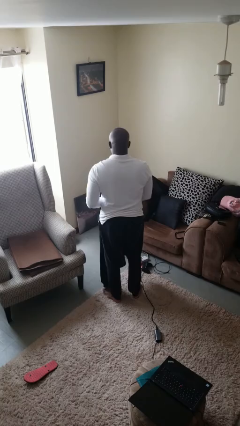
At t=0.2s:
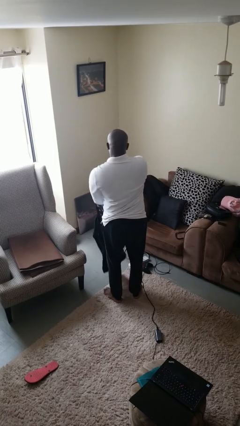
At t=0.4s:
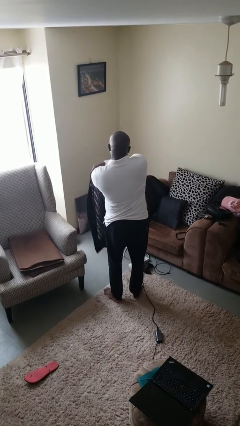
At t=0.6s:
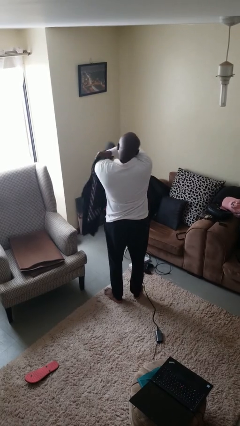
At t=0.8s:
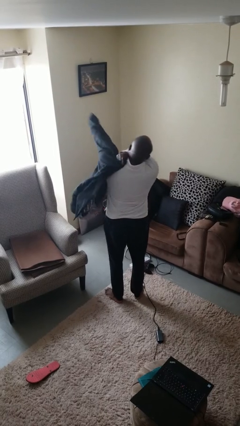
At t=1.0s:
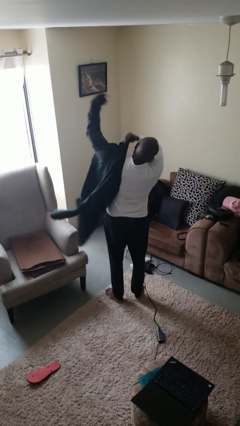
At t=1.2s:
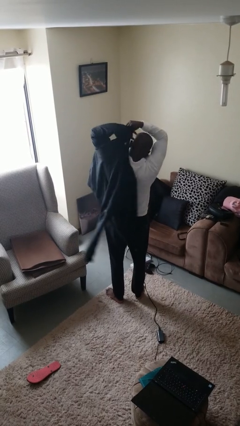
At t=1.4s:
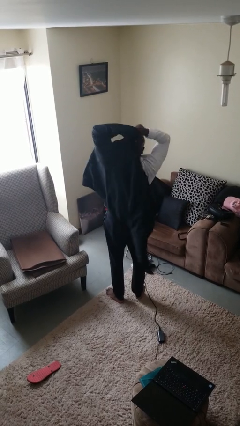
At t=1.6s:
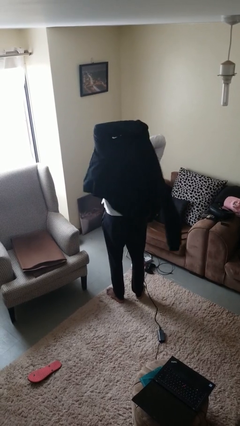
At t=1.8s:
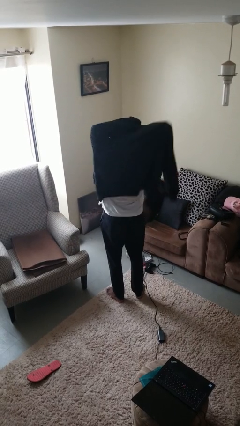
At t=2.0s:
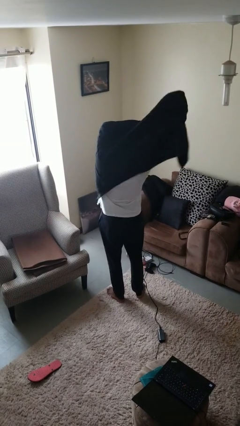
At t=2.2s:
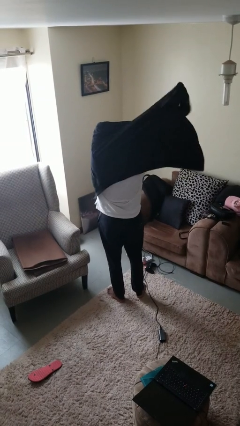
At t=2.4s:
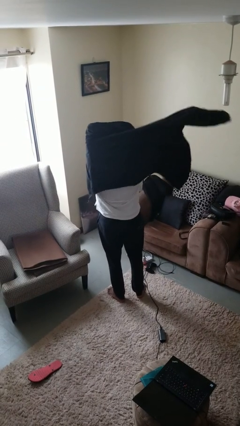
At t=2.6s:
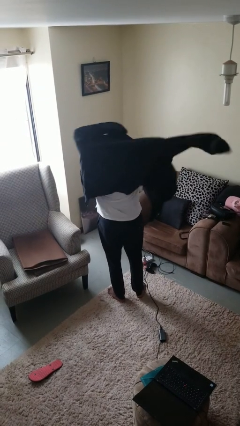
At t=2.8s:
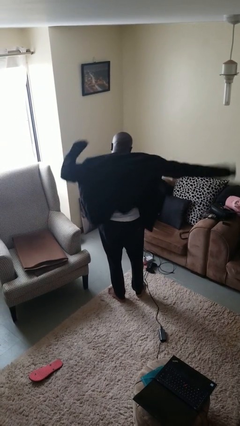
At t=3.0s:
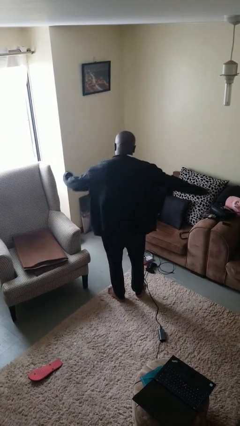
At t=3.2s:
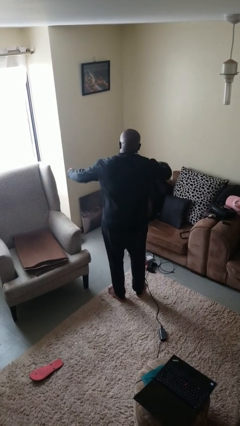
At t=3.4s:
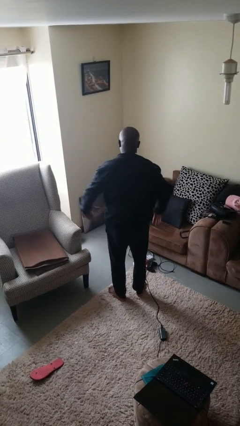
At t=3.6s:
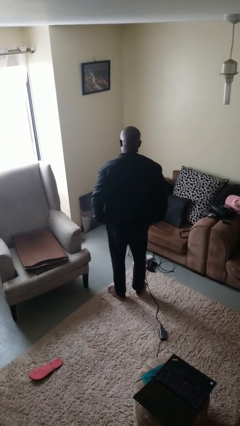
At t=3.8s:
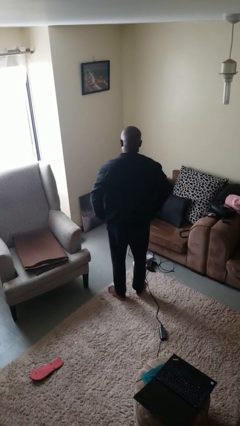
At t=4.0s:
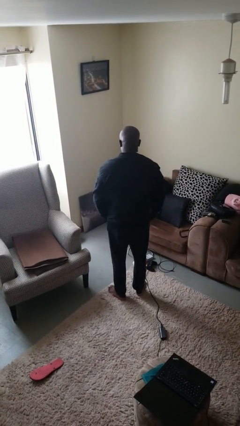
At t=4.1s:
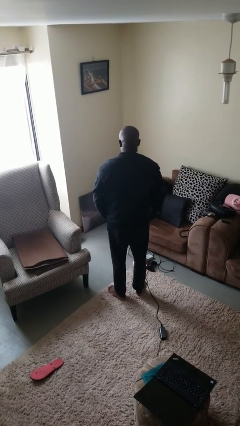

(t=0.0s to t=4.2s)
person puts on jacket

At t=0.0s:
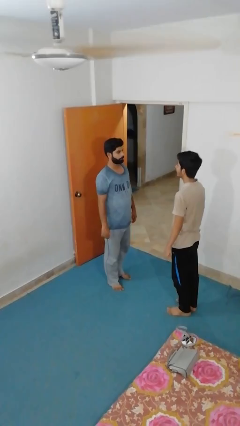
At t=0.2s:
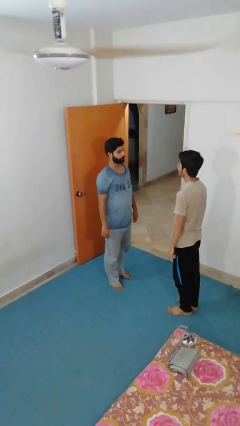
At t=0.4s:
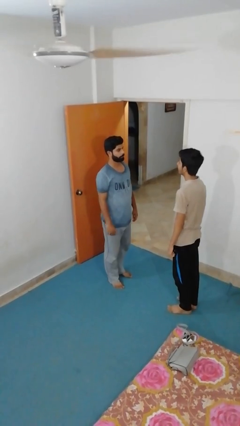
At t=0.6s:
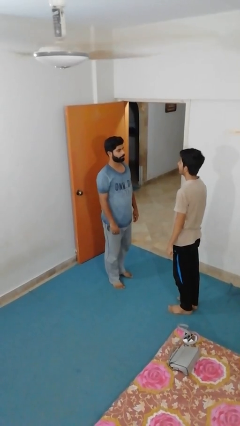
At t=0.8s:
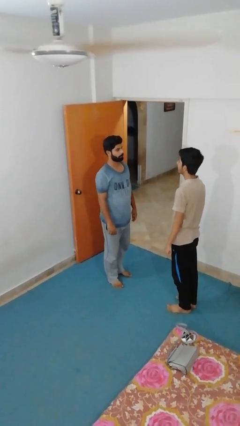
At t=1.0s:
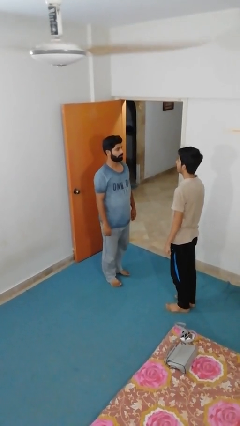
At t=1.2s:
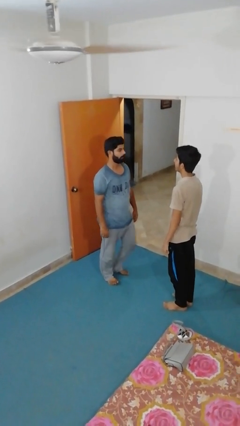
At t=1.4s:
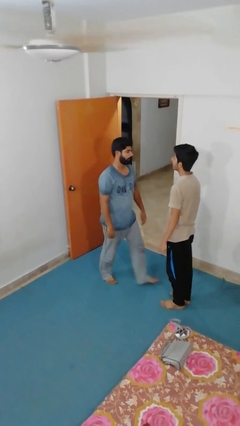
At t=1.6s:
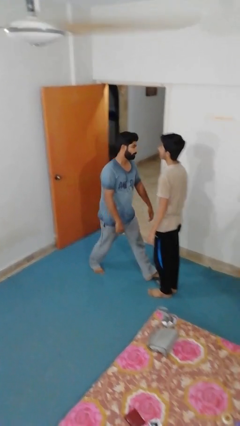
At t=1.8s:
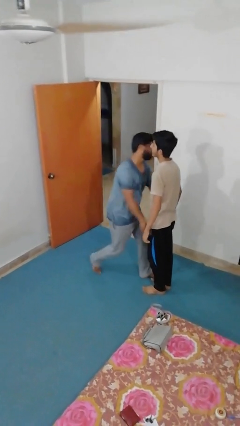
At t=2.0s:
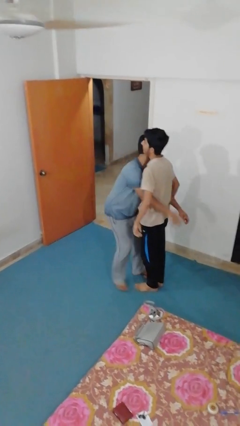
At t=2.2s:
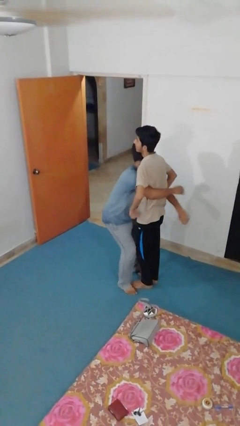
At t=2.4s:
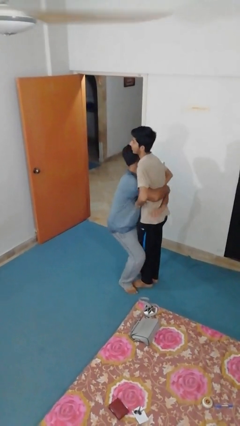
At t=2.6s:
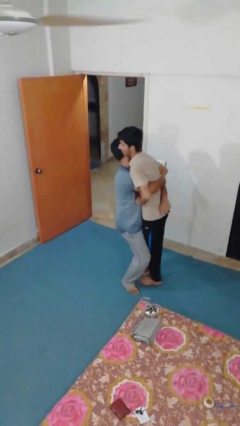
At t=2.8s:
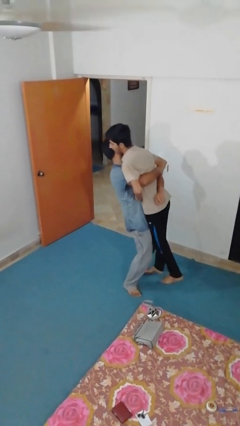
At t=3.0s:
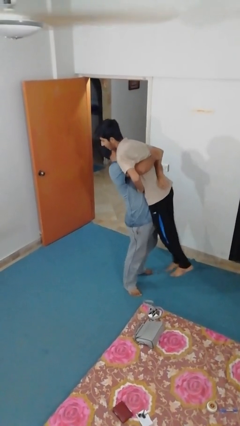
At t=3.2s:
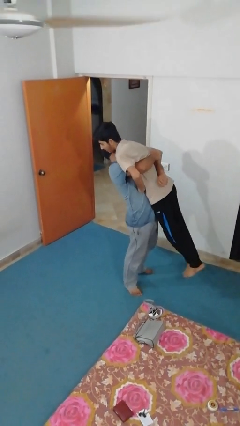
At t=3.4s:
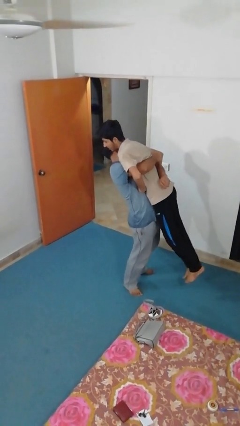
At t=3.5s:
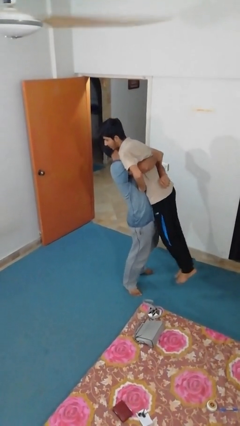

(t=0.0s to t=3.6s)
person picks up person

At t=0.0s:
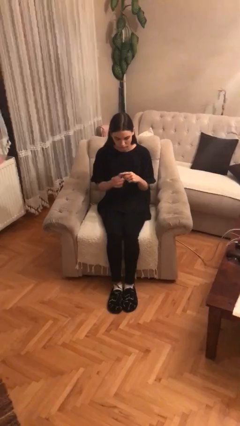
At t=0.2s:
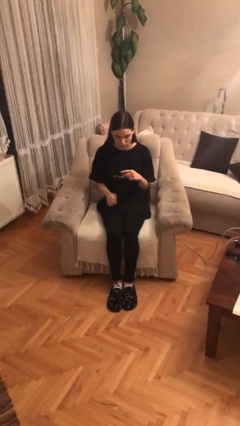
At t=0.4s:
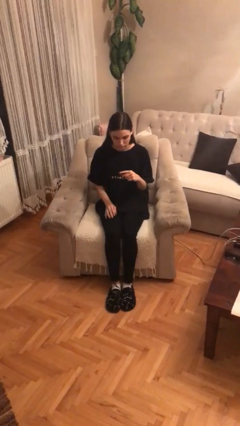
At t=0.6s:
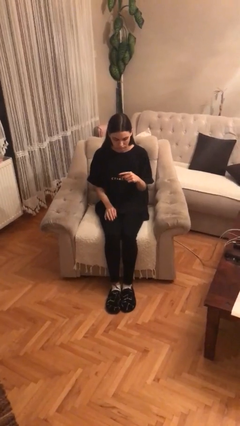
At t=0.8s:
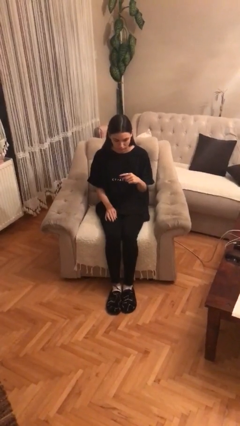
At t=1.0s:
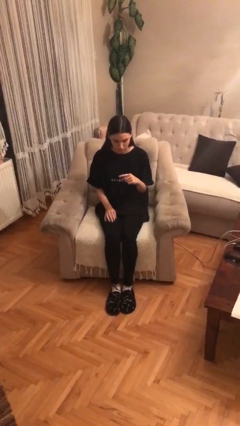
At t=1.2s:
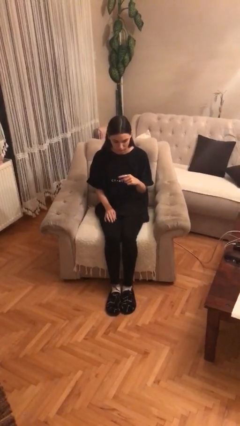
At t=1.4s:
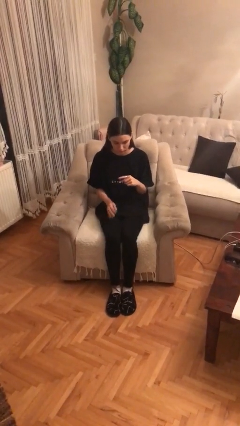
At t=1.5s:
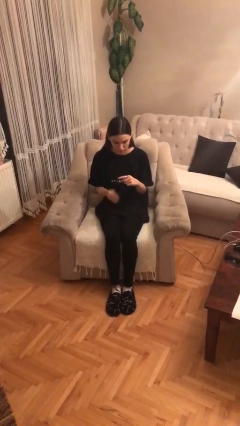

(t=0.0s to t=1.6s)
person puts on ring

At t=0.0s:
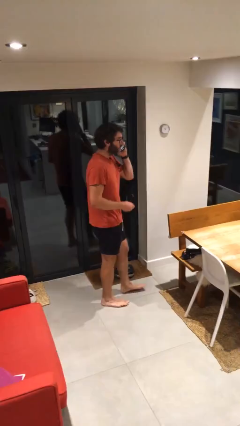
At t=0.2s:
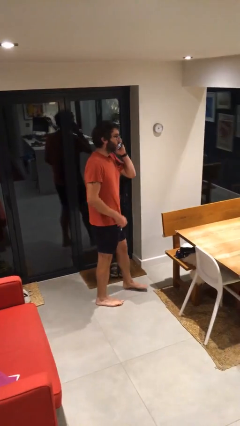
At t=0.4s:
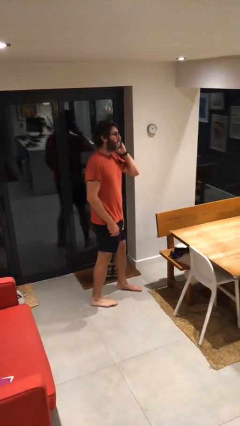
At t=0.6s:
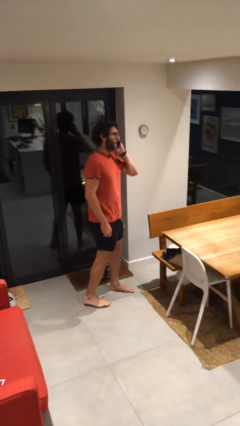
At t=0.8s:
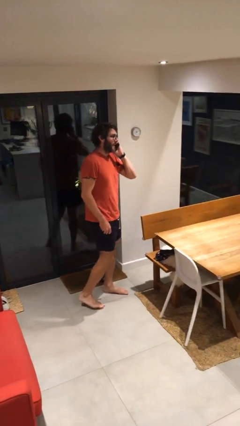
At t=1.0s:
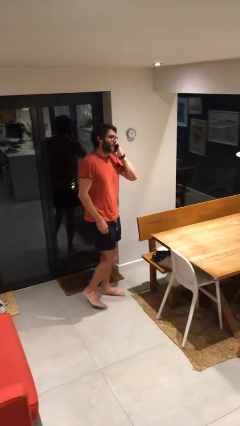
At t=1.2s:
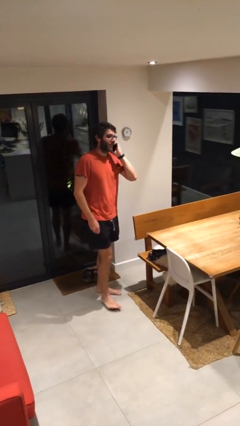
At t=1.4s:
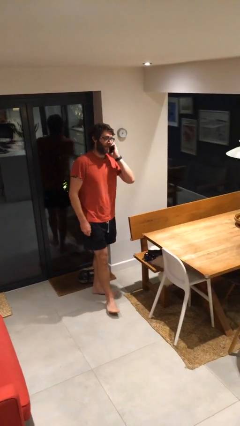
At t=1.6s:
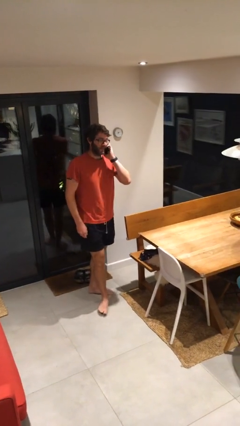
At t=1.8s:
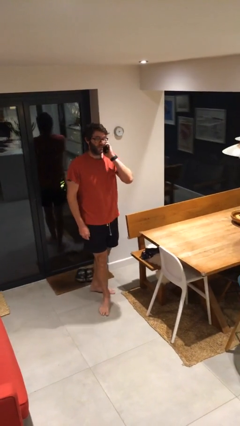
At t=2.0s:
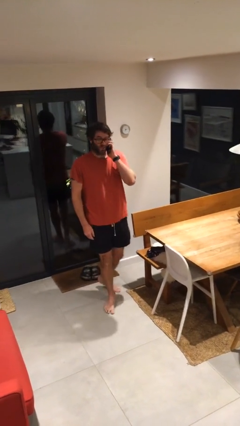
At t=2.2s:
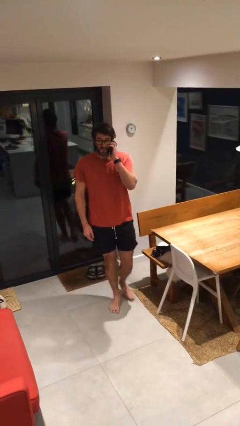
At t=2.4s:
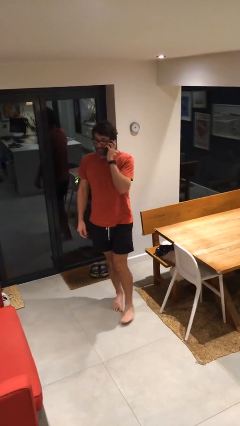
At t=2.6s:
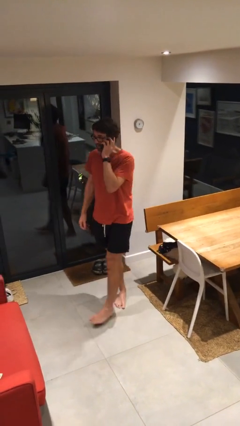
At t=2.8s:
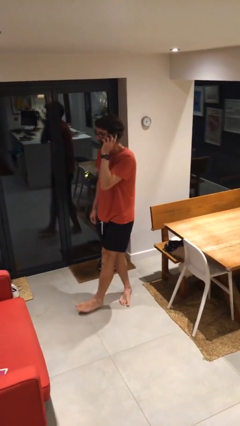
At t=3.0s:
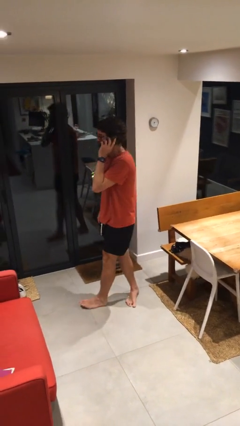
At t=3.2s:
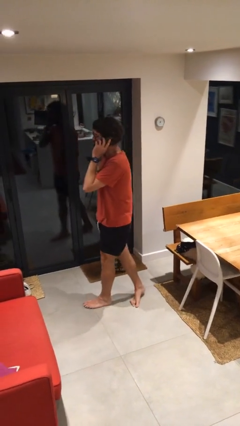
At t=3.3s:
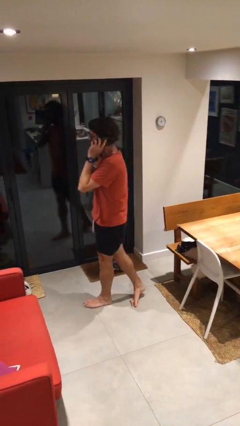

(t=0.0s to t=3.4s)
person talks on phone

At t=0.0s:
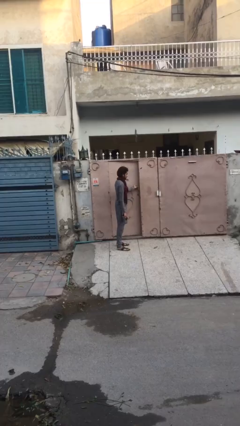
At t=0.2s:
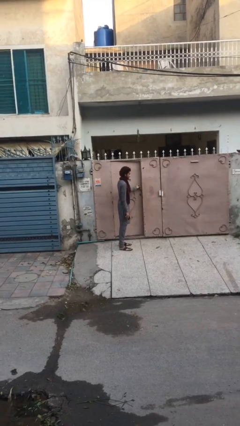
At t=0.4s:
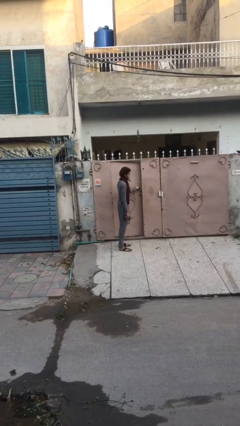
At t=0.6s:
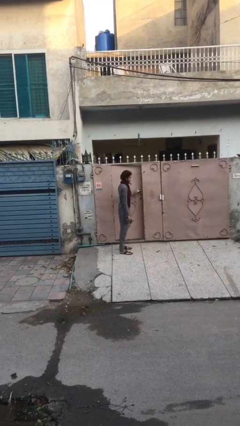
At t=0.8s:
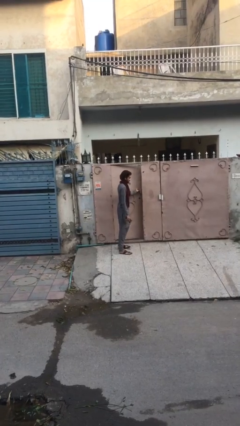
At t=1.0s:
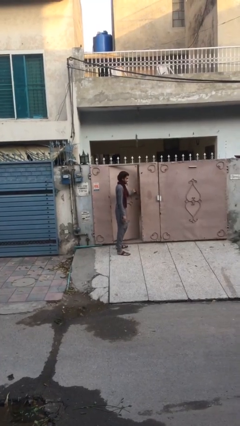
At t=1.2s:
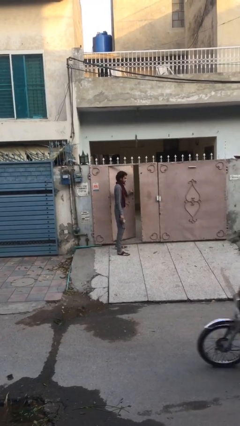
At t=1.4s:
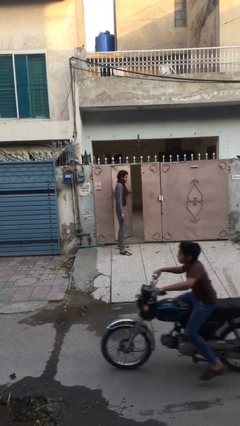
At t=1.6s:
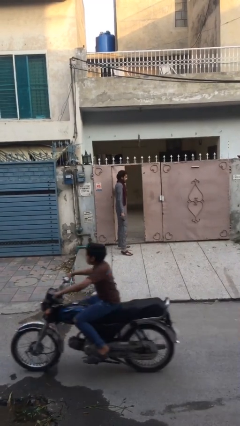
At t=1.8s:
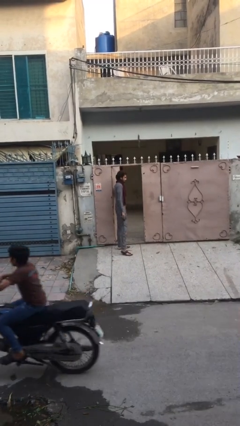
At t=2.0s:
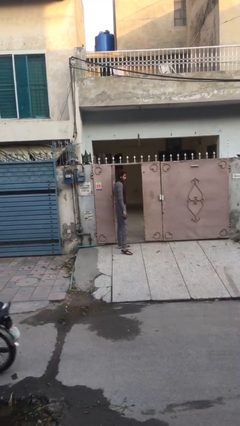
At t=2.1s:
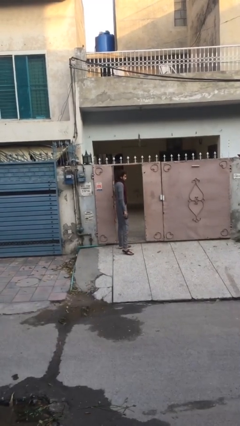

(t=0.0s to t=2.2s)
person opens facility door

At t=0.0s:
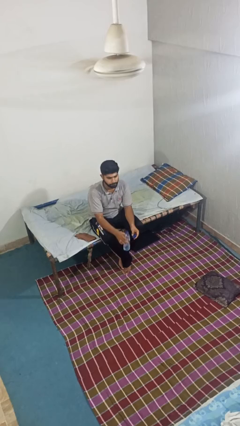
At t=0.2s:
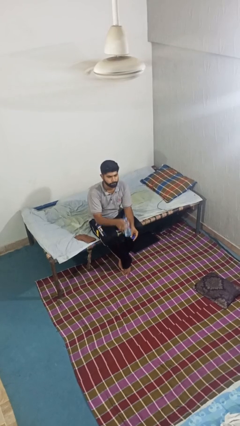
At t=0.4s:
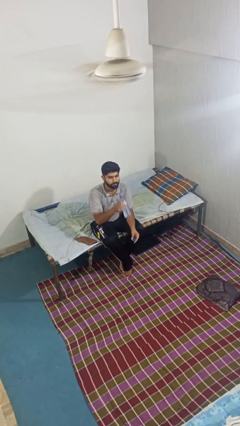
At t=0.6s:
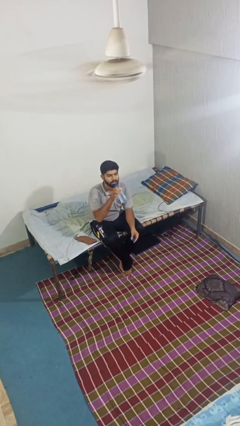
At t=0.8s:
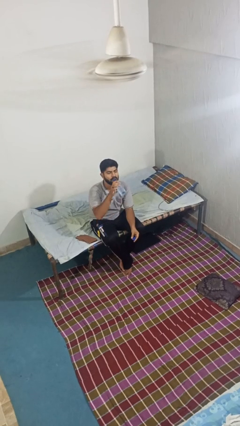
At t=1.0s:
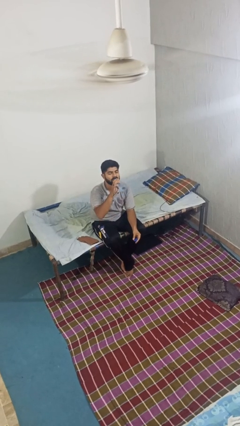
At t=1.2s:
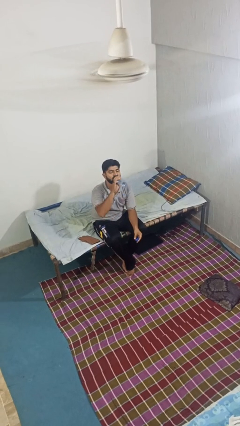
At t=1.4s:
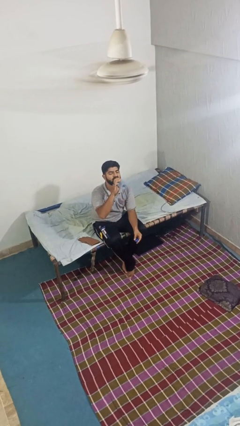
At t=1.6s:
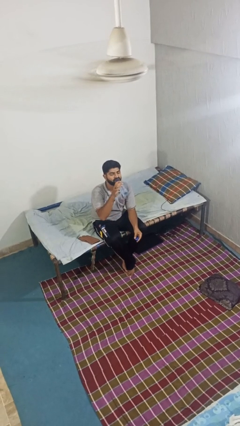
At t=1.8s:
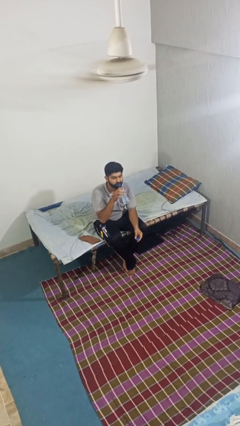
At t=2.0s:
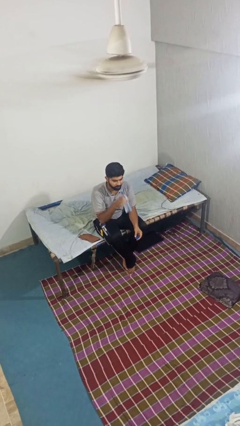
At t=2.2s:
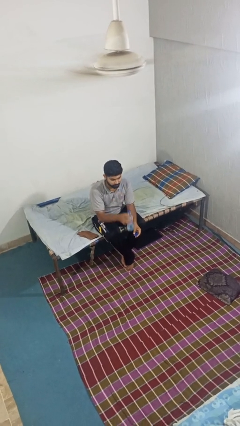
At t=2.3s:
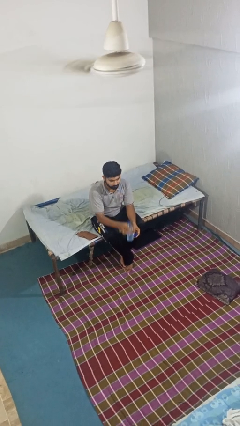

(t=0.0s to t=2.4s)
person drinks from bottle
